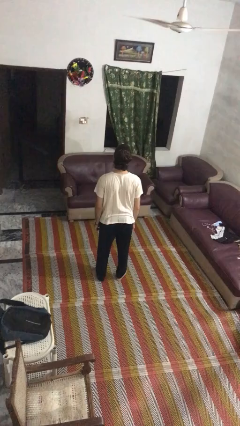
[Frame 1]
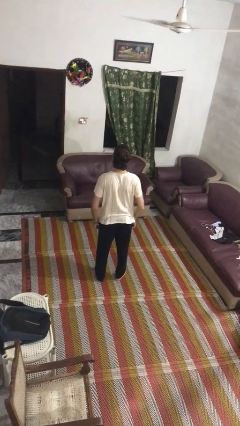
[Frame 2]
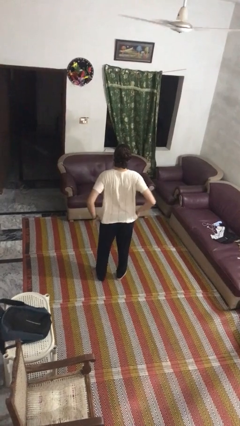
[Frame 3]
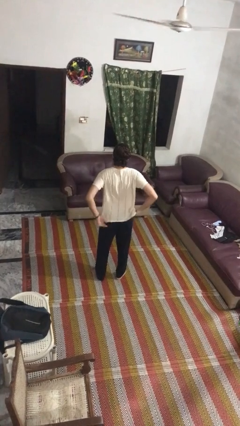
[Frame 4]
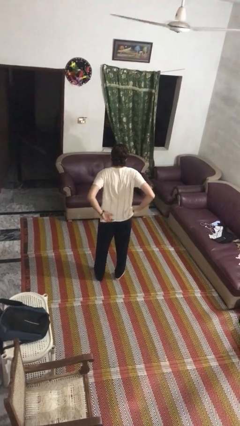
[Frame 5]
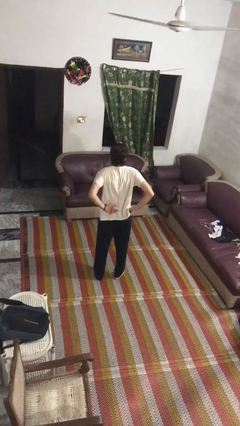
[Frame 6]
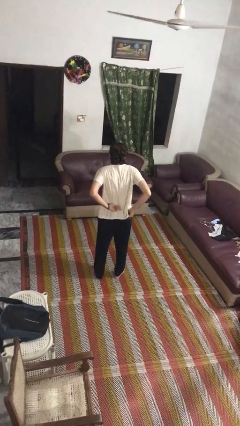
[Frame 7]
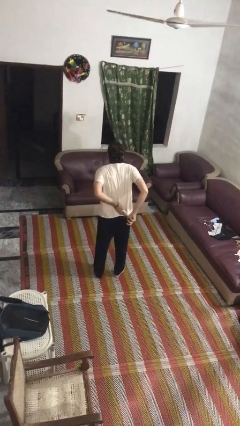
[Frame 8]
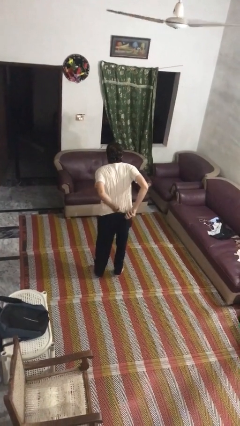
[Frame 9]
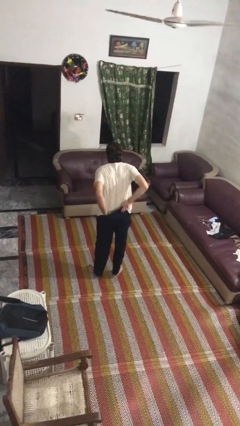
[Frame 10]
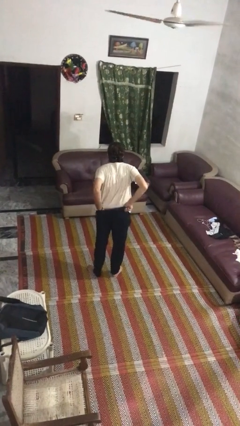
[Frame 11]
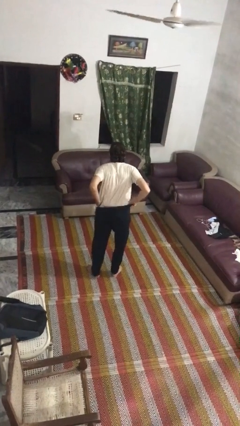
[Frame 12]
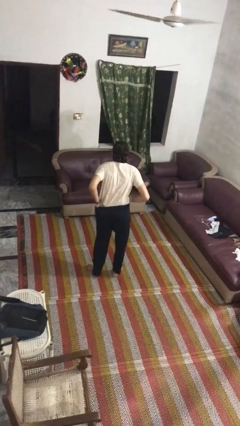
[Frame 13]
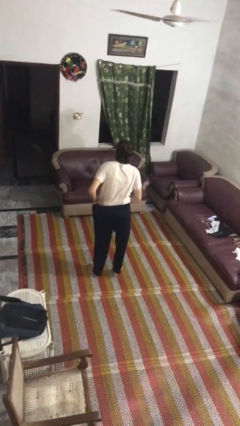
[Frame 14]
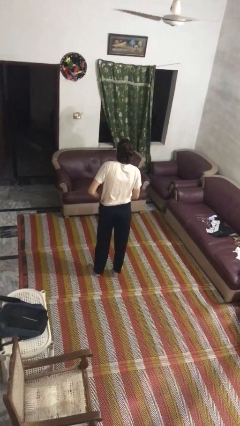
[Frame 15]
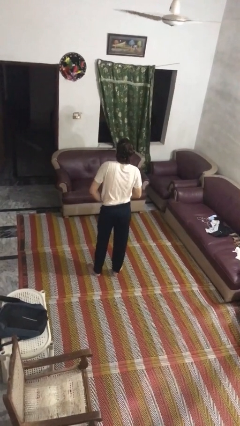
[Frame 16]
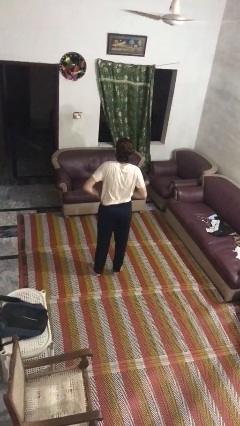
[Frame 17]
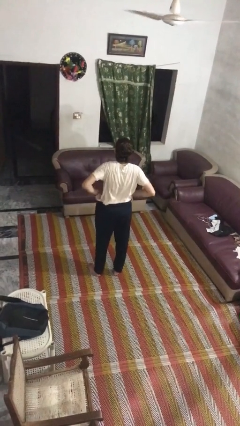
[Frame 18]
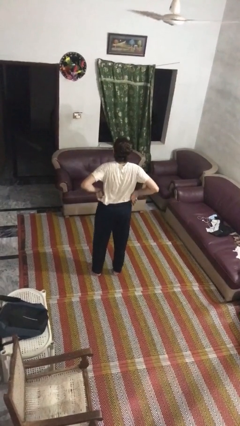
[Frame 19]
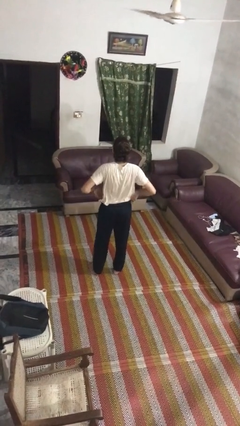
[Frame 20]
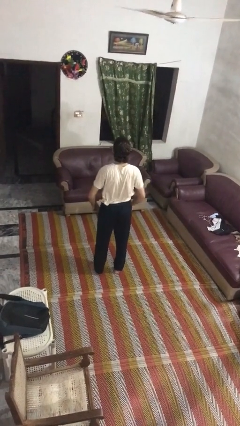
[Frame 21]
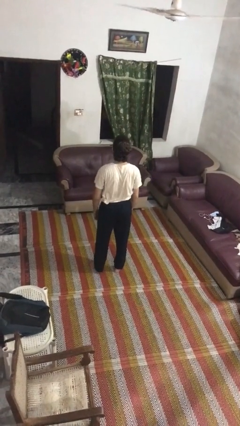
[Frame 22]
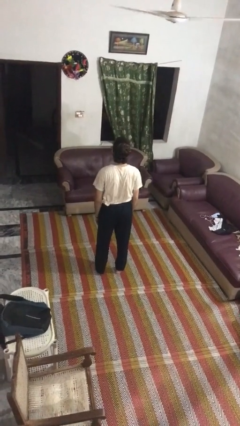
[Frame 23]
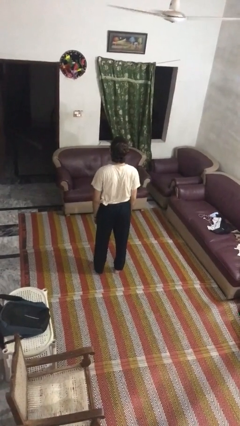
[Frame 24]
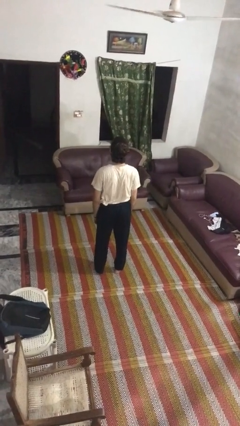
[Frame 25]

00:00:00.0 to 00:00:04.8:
person tucks in shirt

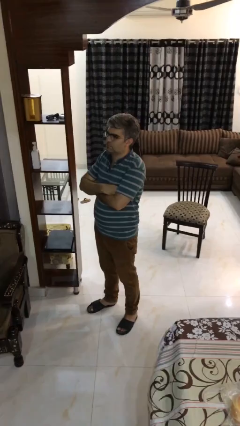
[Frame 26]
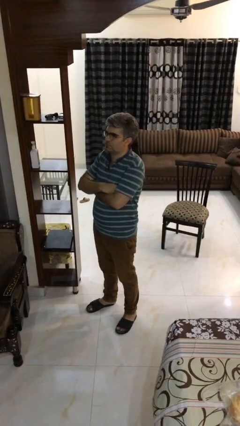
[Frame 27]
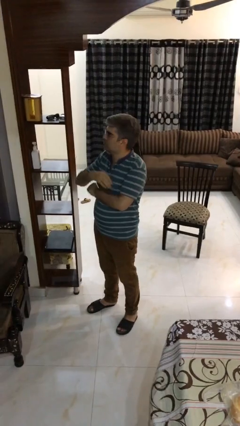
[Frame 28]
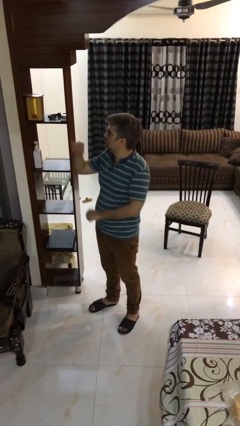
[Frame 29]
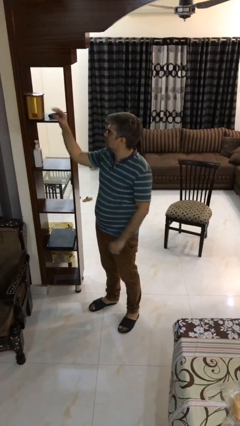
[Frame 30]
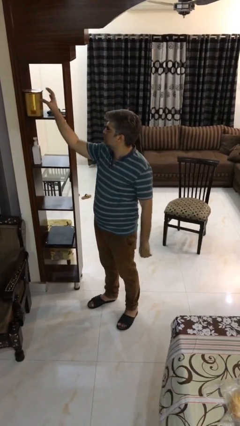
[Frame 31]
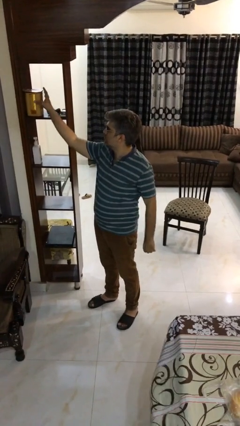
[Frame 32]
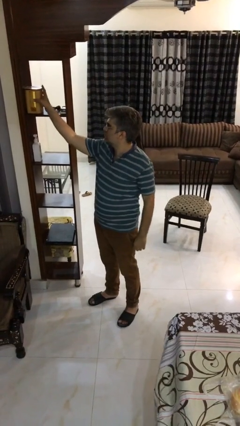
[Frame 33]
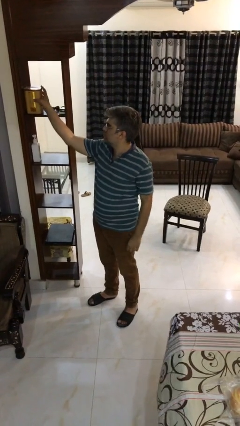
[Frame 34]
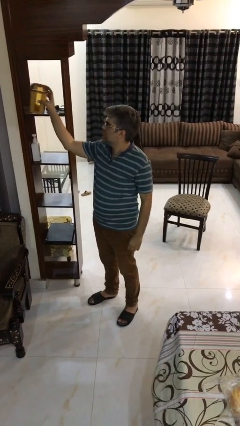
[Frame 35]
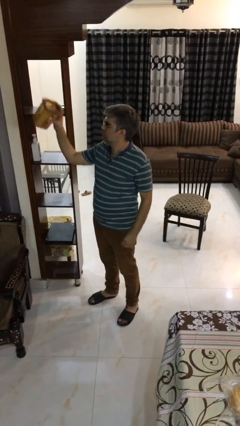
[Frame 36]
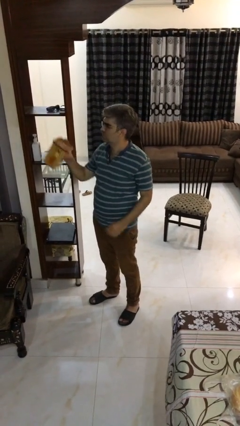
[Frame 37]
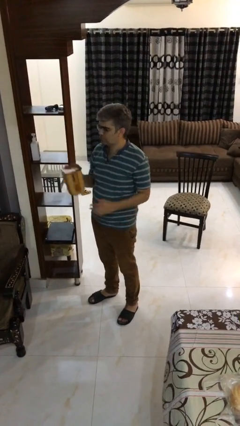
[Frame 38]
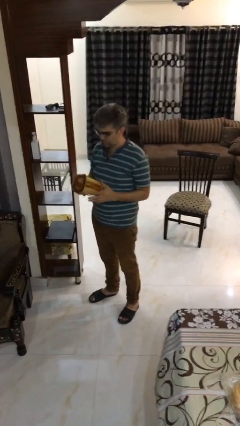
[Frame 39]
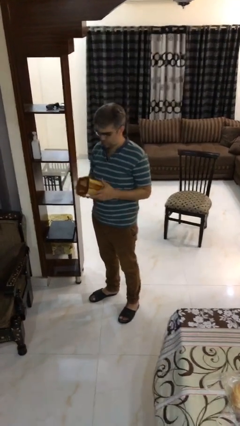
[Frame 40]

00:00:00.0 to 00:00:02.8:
person picks up object from shelf

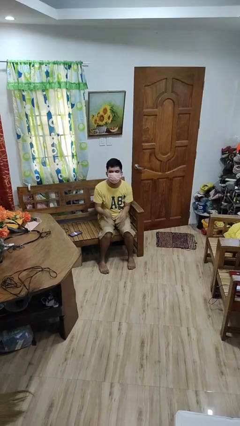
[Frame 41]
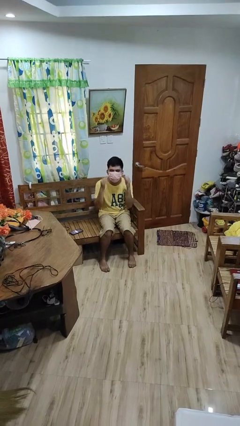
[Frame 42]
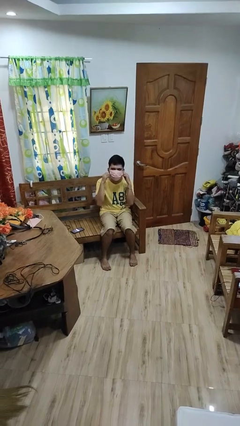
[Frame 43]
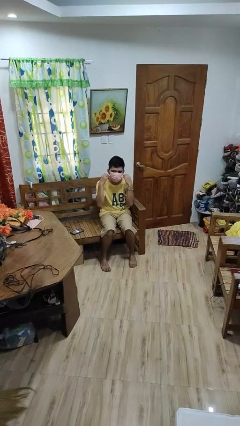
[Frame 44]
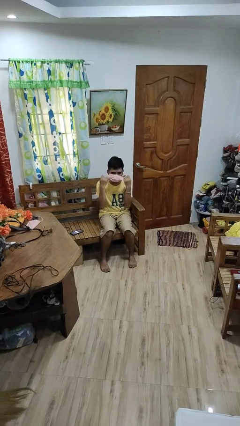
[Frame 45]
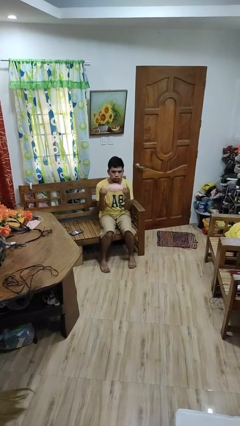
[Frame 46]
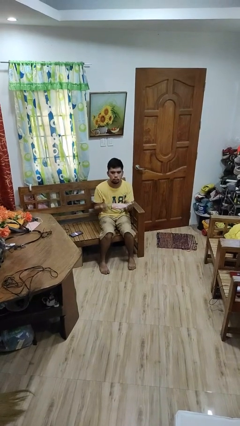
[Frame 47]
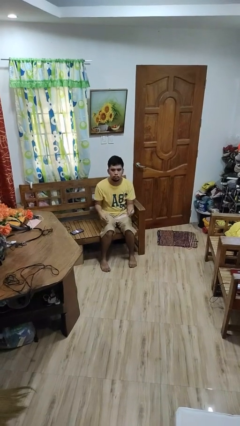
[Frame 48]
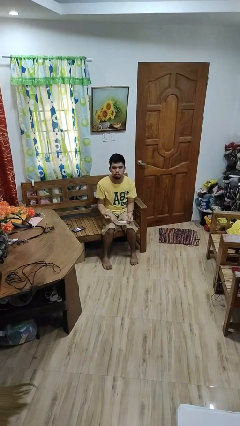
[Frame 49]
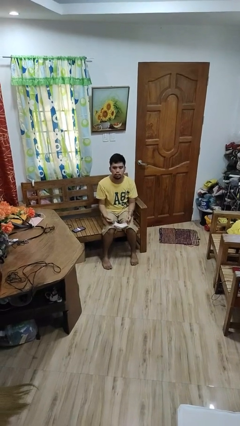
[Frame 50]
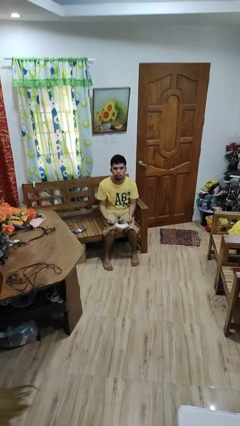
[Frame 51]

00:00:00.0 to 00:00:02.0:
person takes off facemask

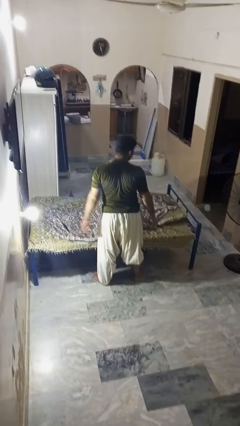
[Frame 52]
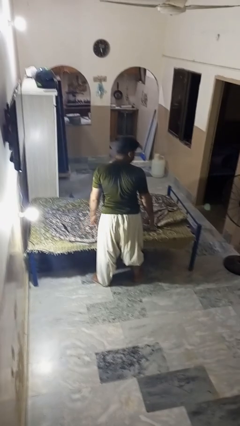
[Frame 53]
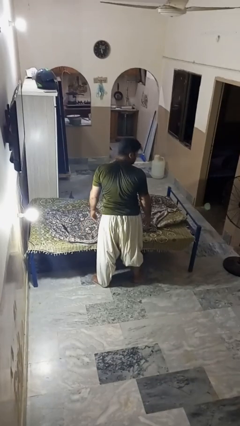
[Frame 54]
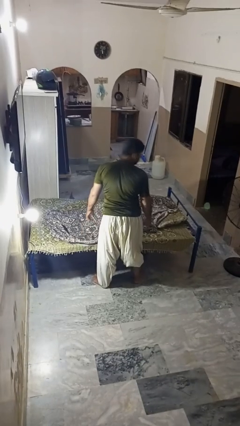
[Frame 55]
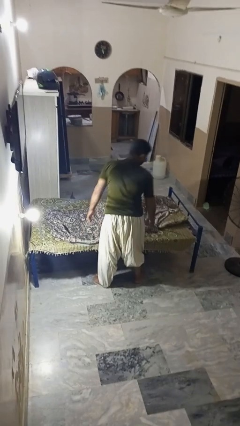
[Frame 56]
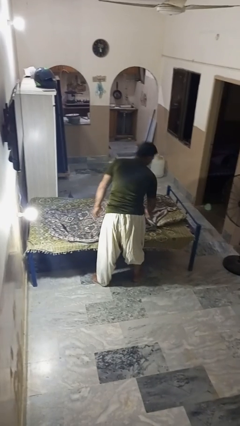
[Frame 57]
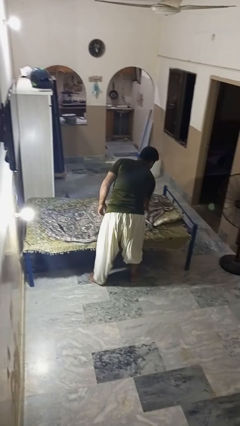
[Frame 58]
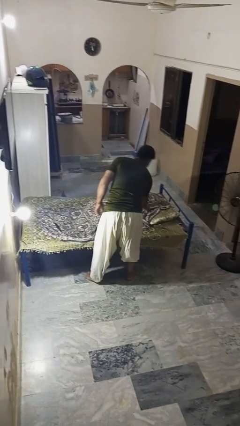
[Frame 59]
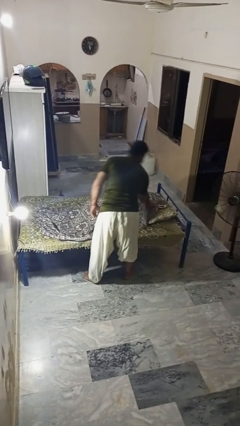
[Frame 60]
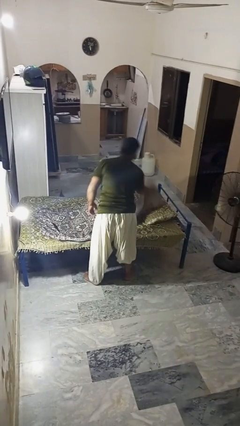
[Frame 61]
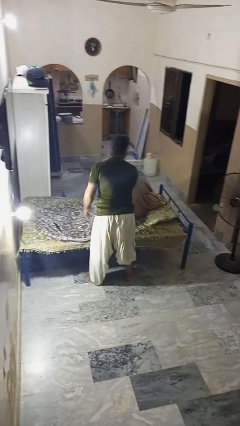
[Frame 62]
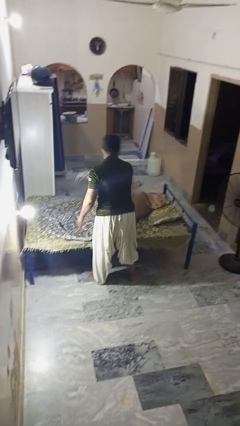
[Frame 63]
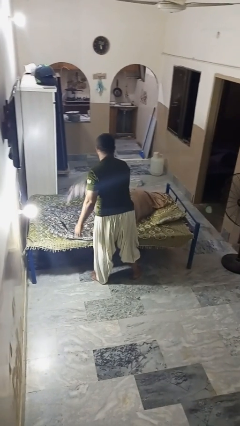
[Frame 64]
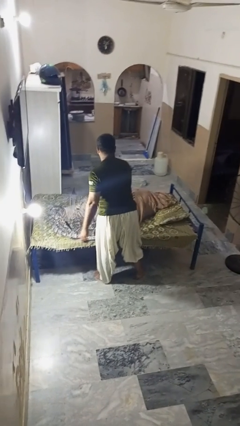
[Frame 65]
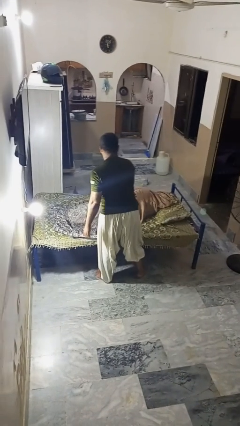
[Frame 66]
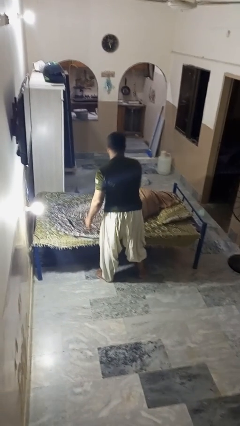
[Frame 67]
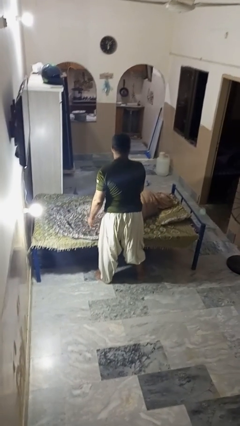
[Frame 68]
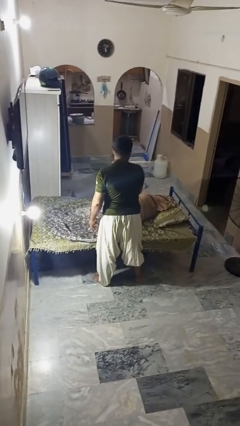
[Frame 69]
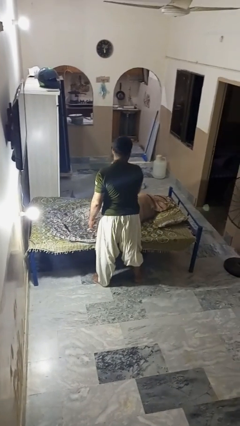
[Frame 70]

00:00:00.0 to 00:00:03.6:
person uncovers friend with blanket

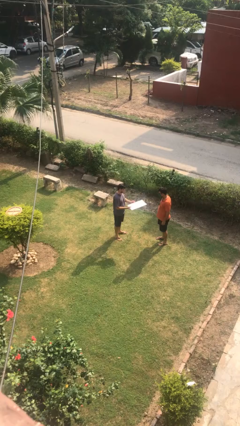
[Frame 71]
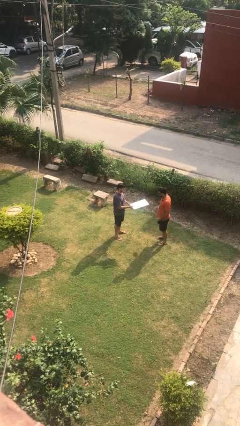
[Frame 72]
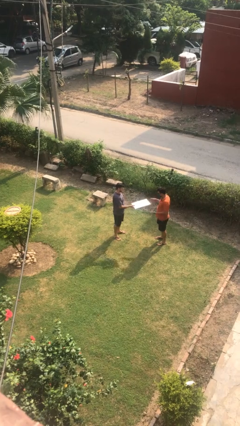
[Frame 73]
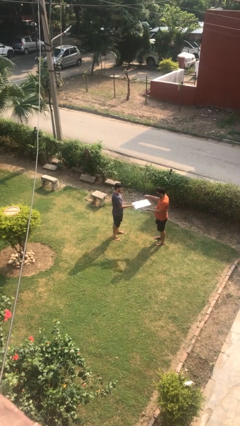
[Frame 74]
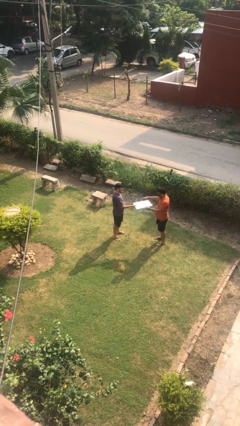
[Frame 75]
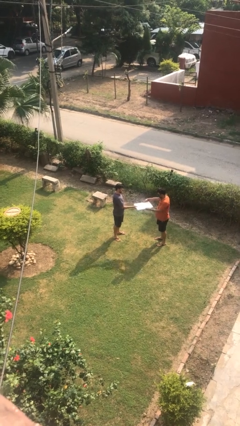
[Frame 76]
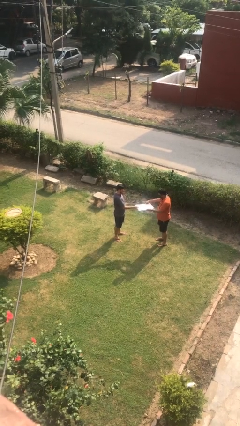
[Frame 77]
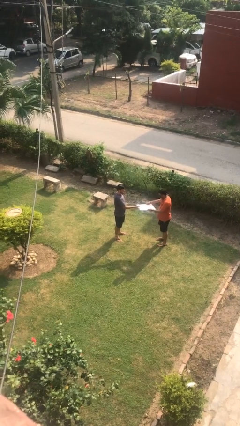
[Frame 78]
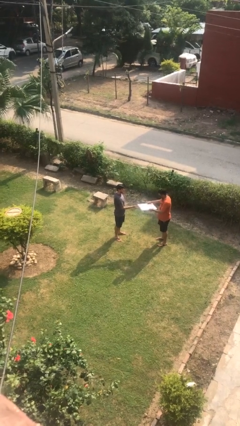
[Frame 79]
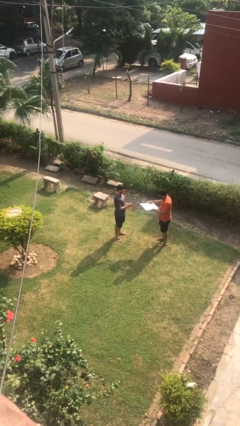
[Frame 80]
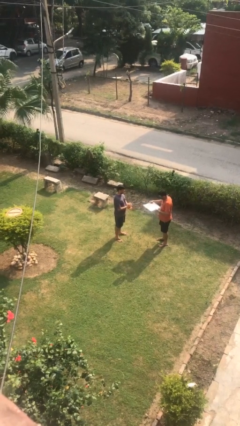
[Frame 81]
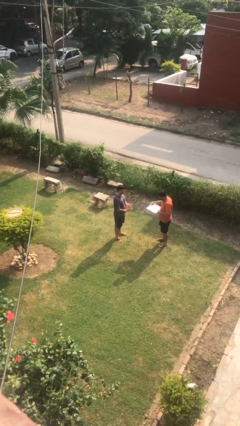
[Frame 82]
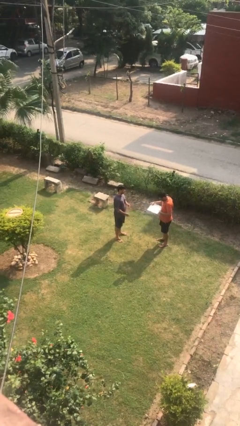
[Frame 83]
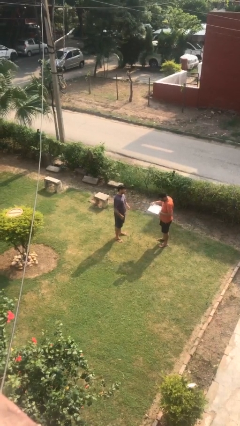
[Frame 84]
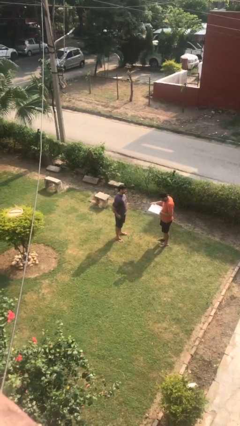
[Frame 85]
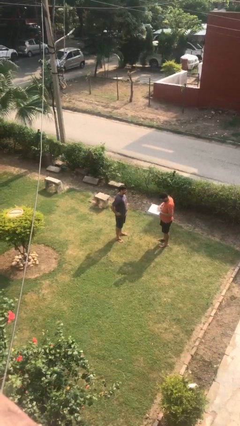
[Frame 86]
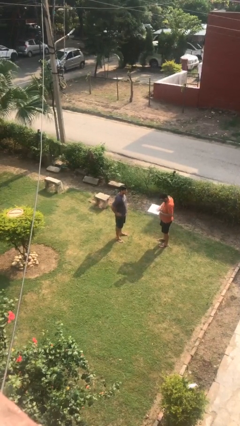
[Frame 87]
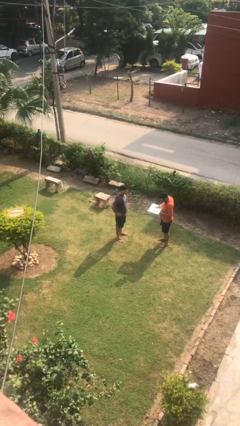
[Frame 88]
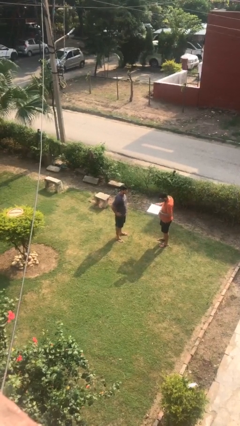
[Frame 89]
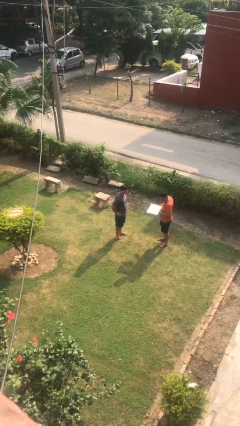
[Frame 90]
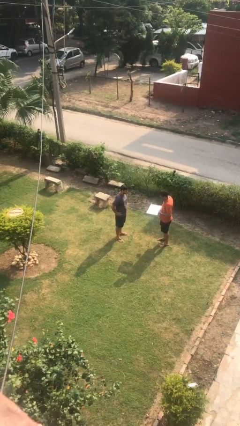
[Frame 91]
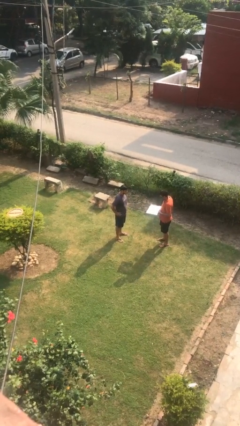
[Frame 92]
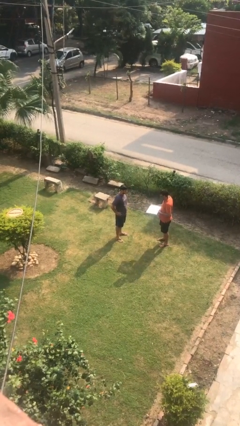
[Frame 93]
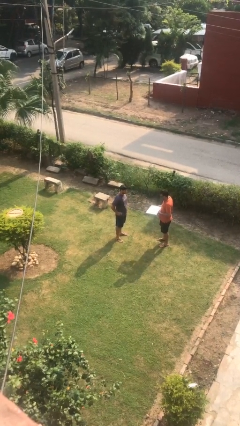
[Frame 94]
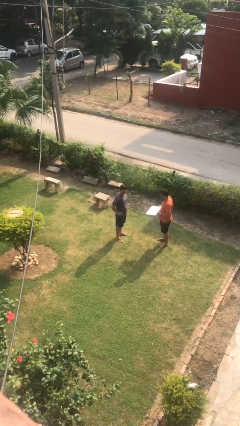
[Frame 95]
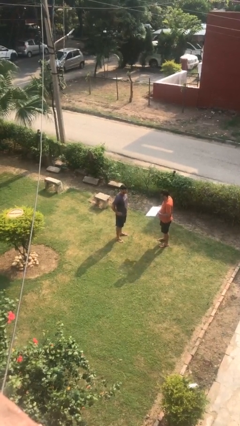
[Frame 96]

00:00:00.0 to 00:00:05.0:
person transfers object to person
